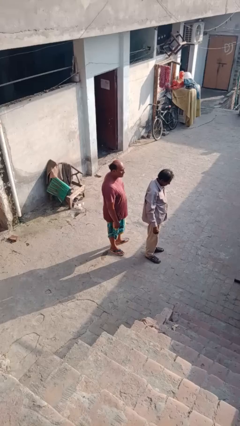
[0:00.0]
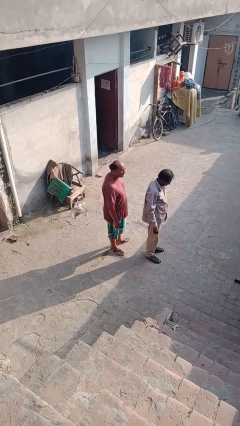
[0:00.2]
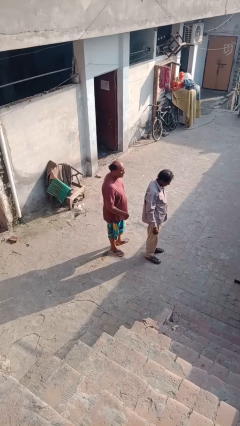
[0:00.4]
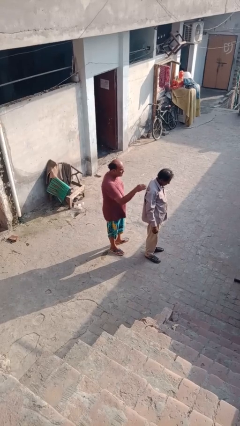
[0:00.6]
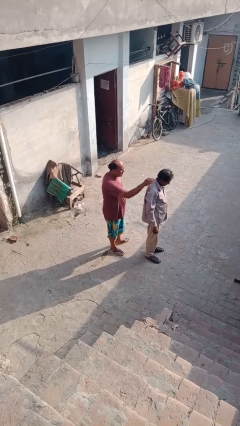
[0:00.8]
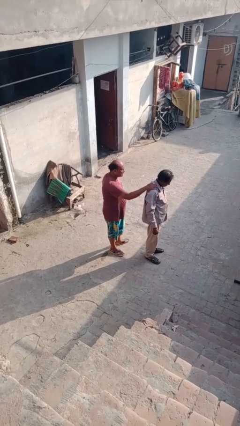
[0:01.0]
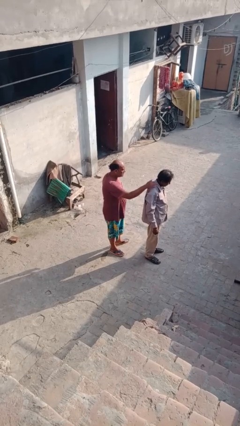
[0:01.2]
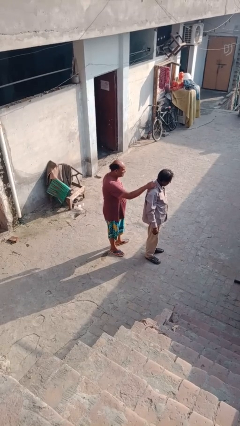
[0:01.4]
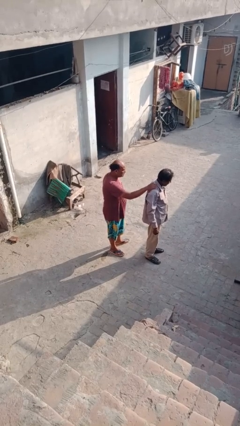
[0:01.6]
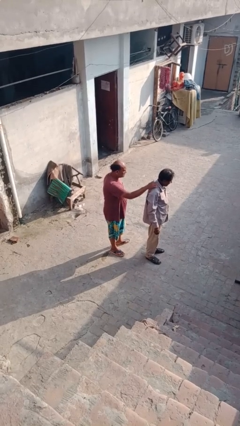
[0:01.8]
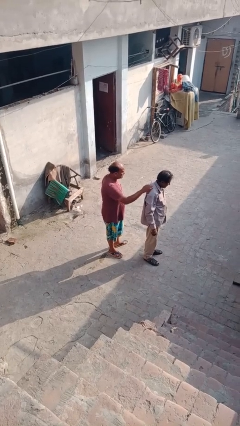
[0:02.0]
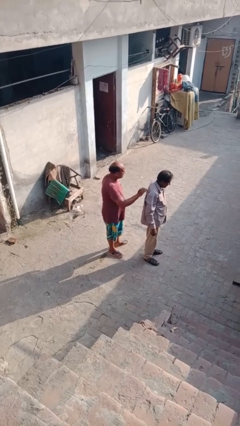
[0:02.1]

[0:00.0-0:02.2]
person touches back of person

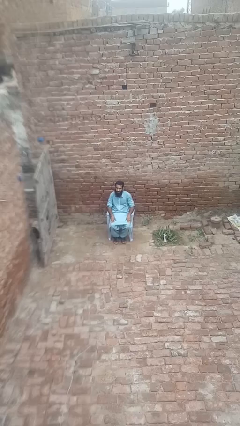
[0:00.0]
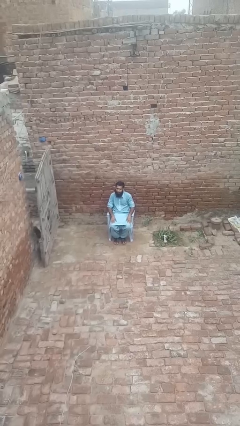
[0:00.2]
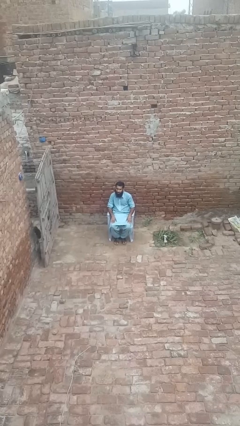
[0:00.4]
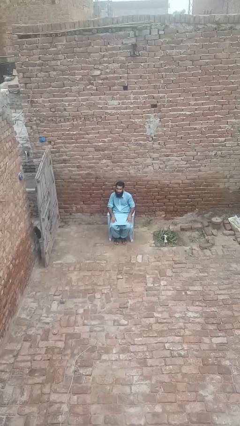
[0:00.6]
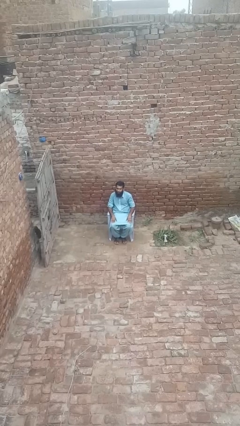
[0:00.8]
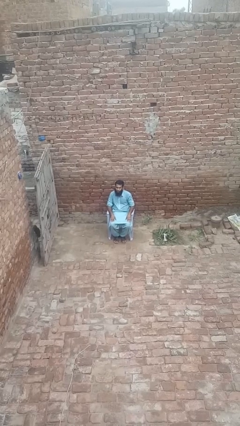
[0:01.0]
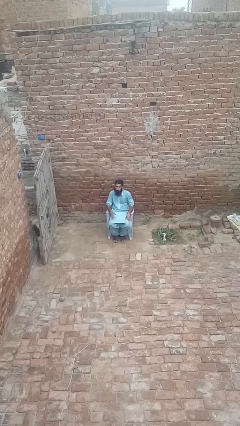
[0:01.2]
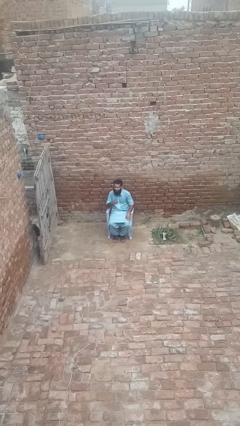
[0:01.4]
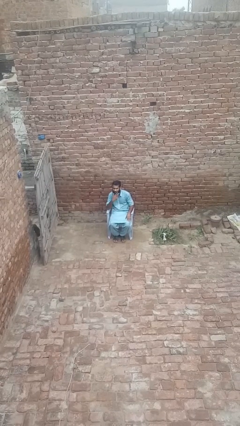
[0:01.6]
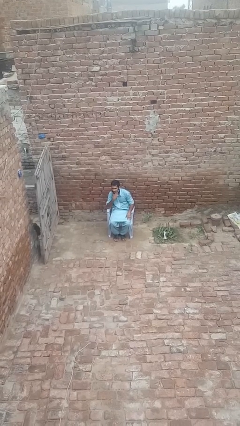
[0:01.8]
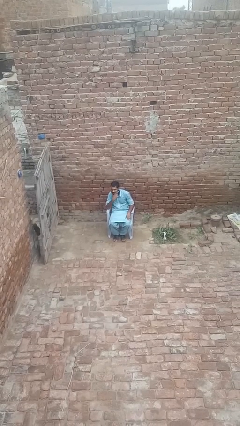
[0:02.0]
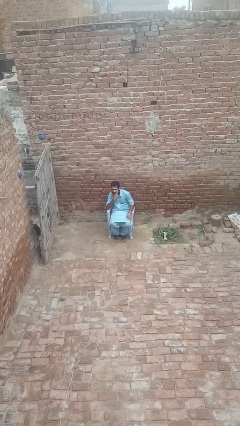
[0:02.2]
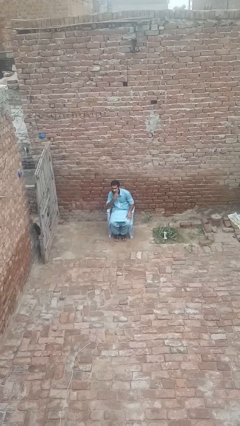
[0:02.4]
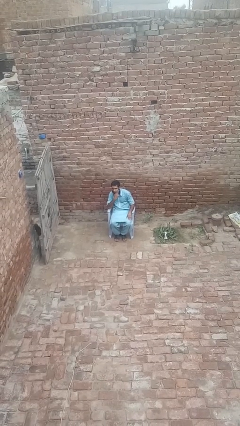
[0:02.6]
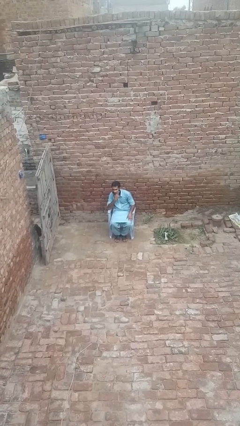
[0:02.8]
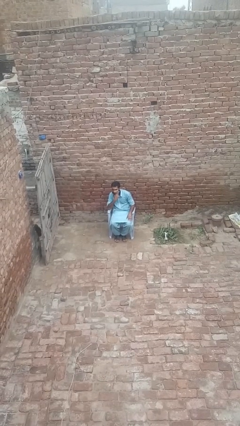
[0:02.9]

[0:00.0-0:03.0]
person strokes chin

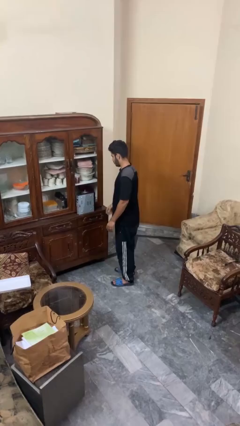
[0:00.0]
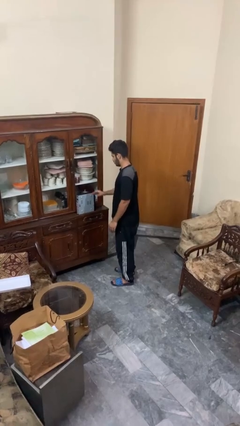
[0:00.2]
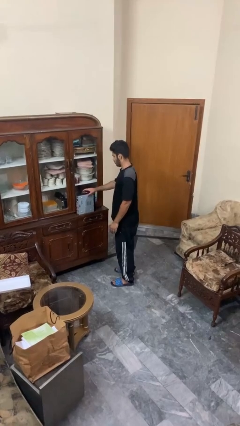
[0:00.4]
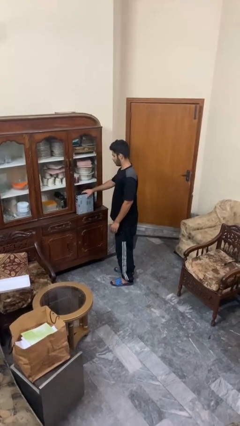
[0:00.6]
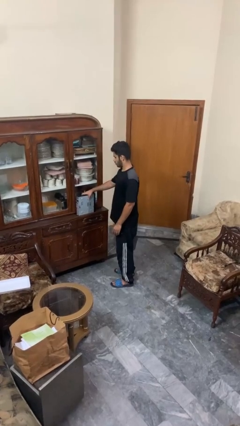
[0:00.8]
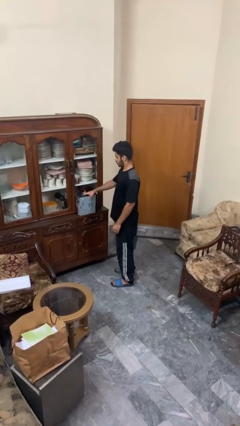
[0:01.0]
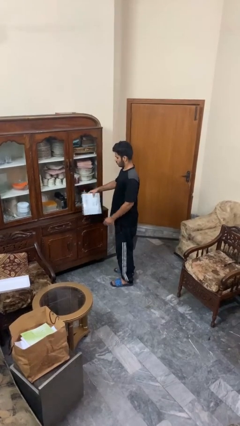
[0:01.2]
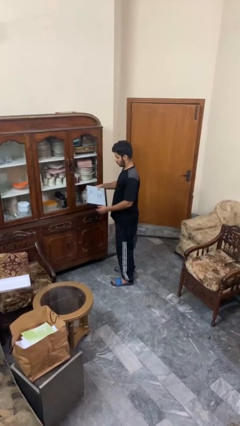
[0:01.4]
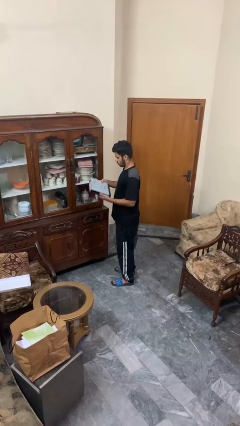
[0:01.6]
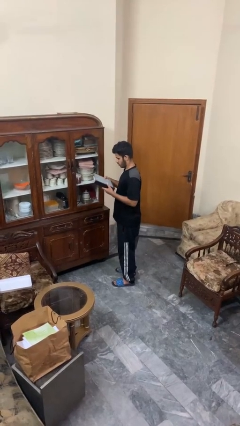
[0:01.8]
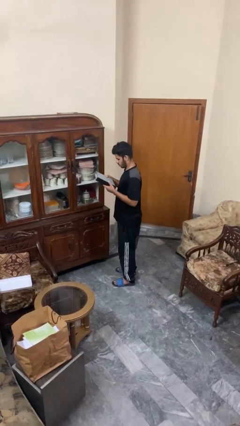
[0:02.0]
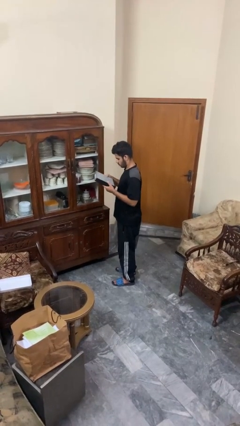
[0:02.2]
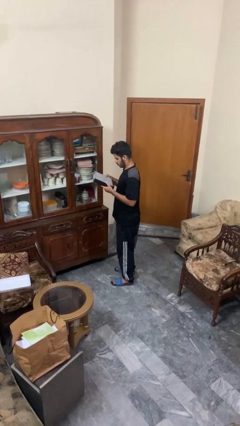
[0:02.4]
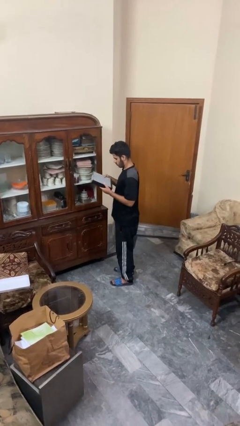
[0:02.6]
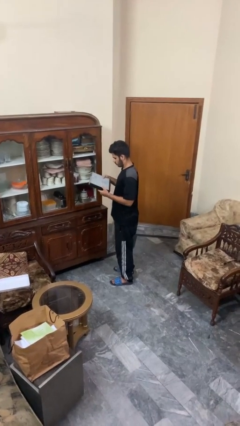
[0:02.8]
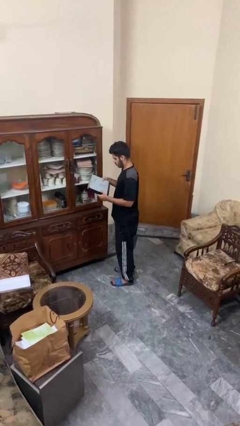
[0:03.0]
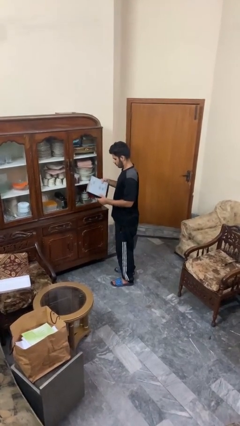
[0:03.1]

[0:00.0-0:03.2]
person picks up object from countertop

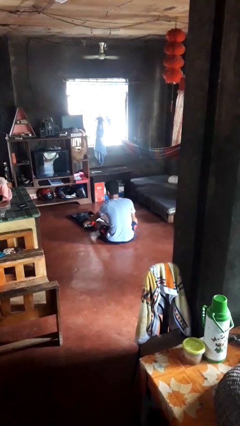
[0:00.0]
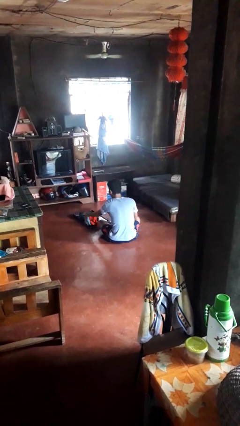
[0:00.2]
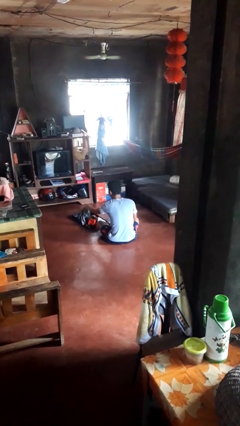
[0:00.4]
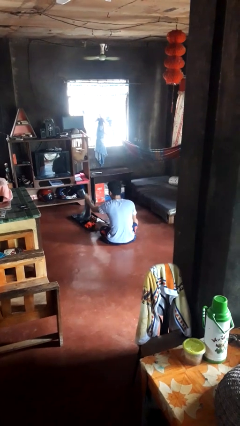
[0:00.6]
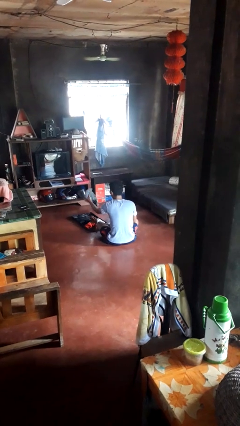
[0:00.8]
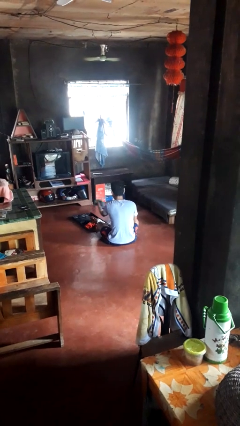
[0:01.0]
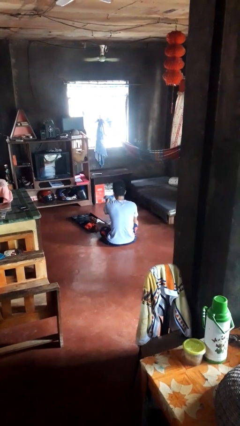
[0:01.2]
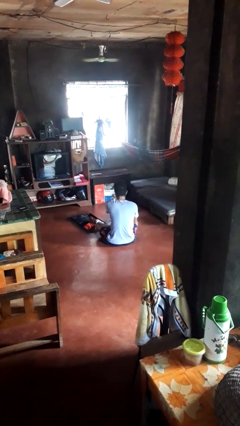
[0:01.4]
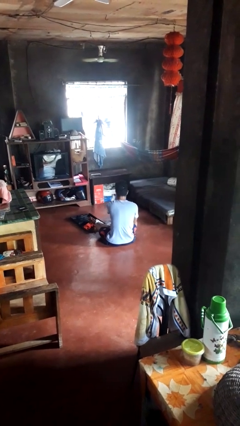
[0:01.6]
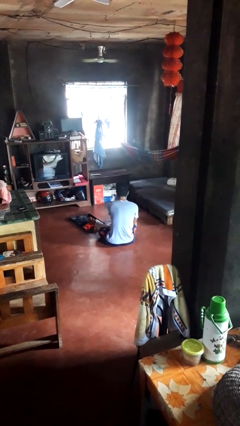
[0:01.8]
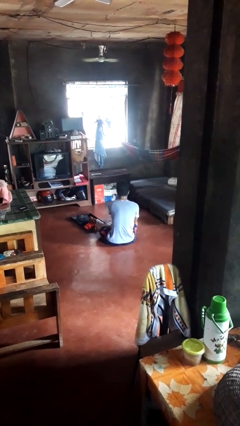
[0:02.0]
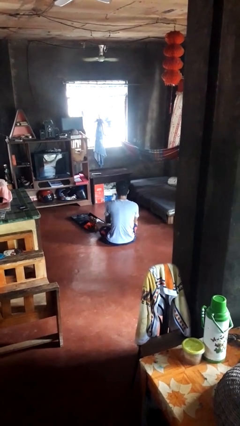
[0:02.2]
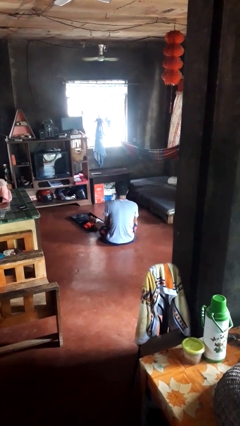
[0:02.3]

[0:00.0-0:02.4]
person unloads clothes from suitcase

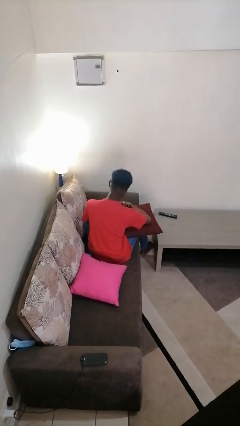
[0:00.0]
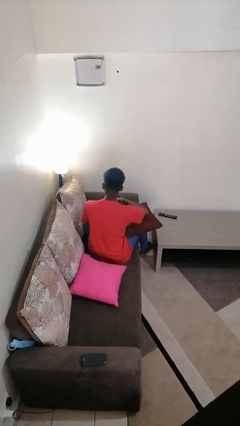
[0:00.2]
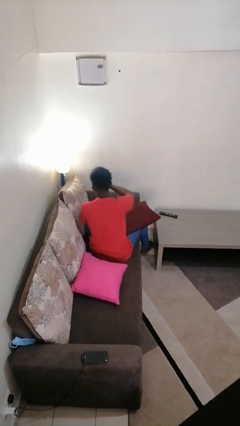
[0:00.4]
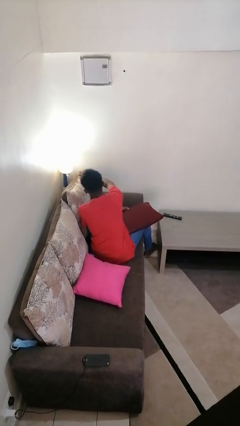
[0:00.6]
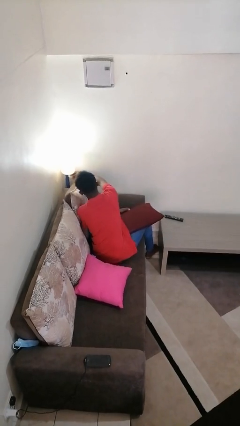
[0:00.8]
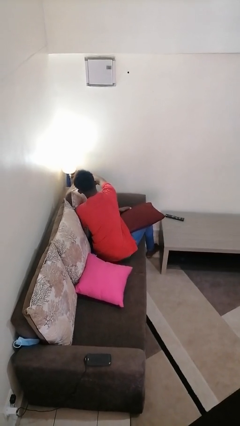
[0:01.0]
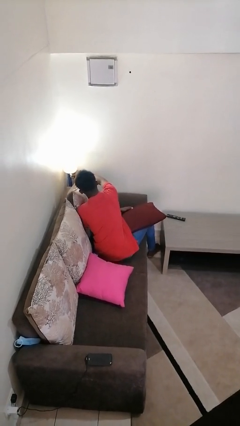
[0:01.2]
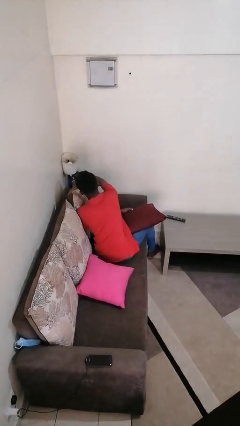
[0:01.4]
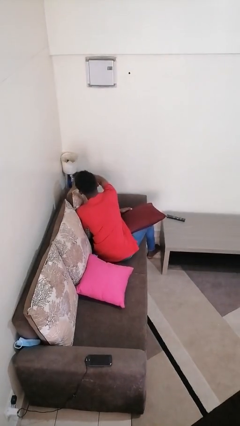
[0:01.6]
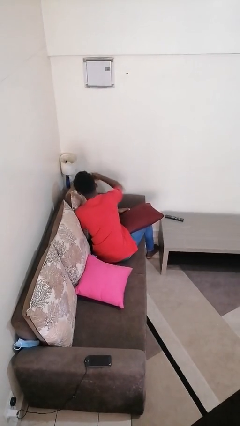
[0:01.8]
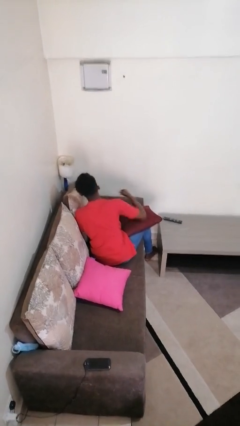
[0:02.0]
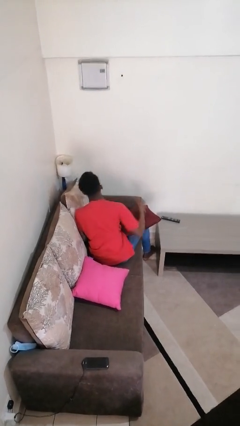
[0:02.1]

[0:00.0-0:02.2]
person turns off lamp

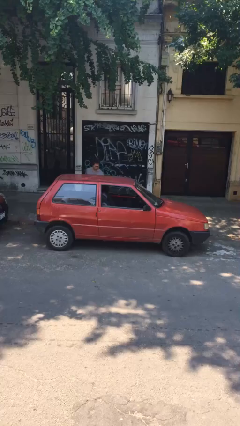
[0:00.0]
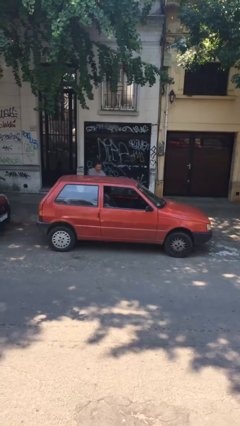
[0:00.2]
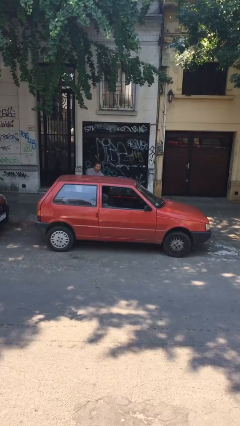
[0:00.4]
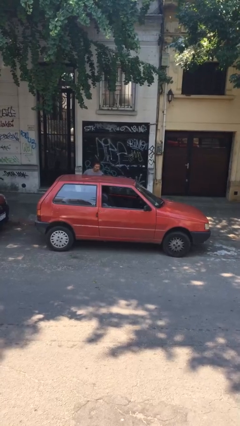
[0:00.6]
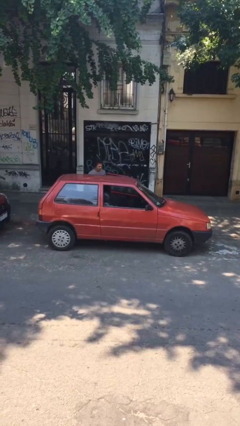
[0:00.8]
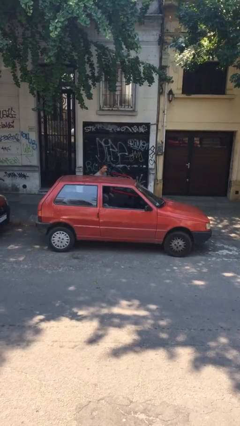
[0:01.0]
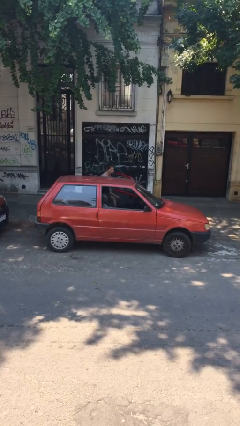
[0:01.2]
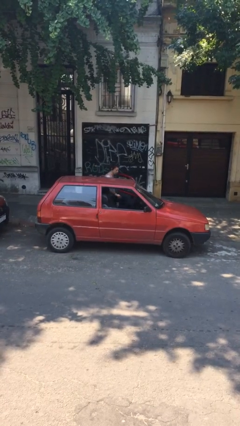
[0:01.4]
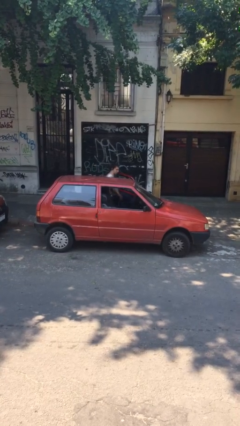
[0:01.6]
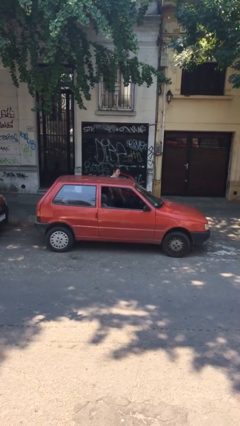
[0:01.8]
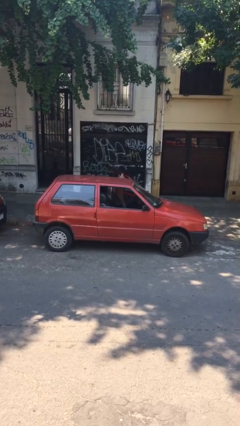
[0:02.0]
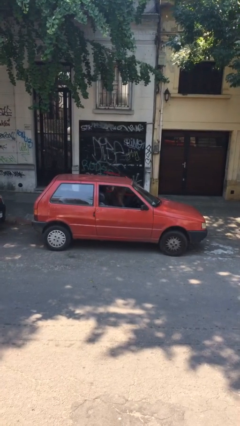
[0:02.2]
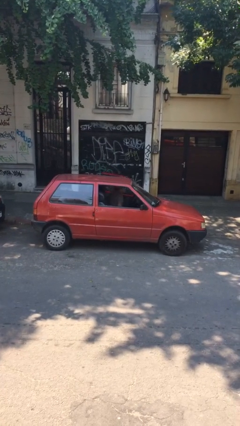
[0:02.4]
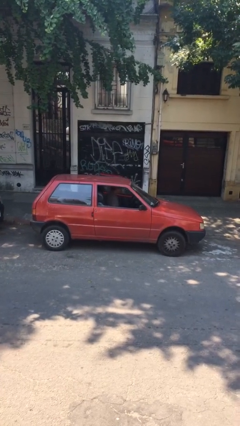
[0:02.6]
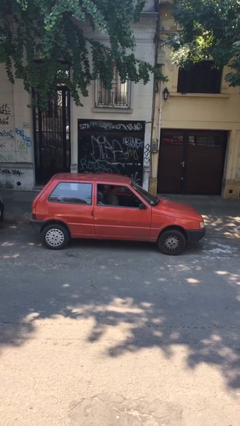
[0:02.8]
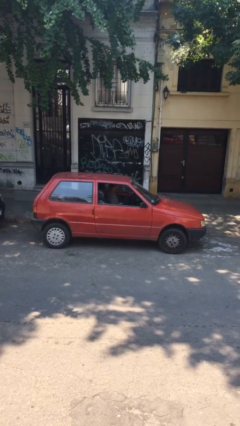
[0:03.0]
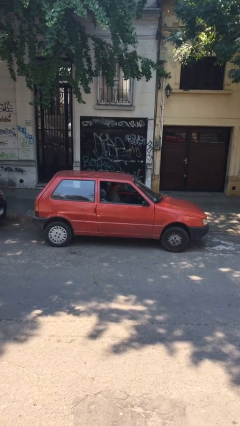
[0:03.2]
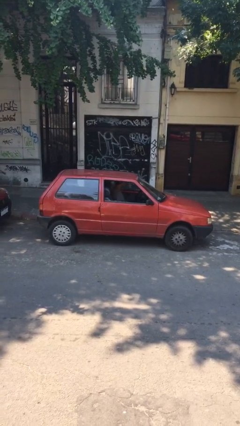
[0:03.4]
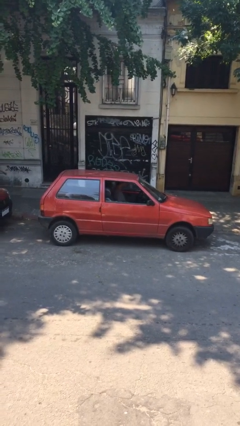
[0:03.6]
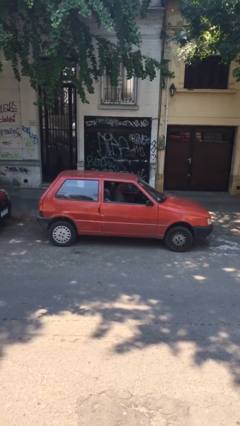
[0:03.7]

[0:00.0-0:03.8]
car picks up person

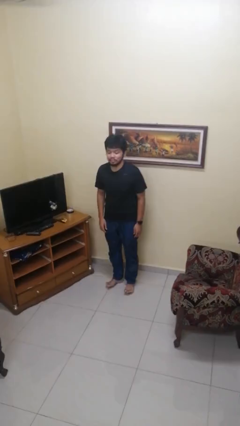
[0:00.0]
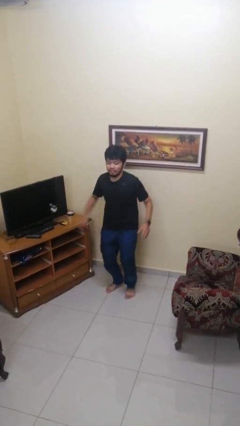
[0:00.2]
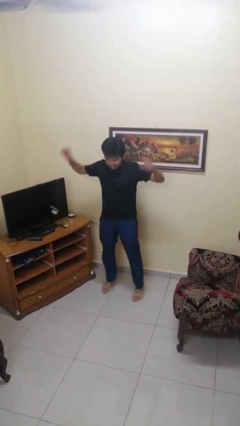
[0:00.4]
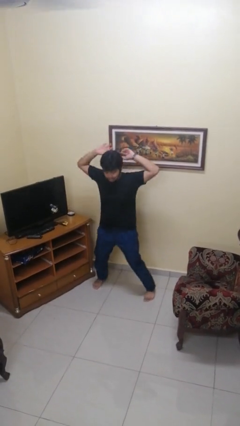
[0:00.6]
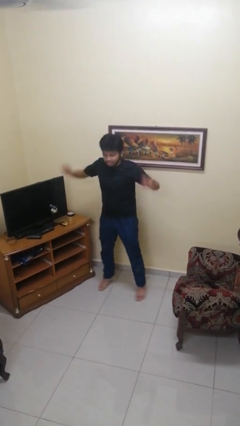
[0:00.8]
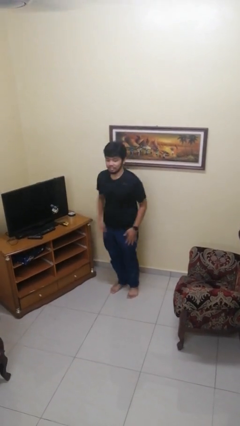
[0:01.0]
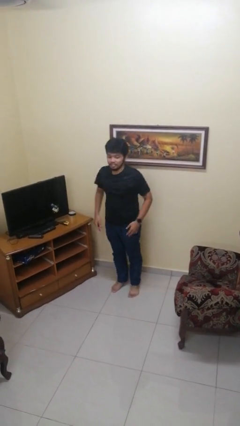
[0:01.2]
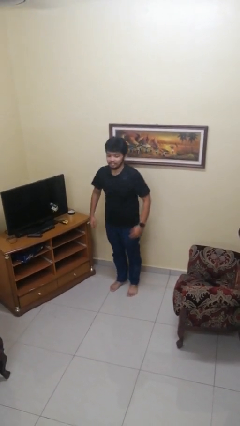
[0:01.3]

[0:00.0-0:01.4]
person exercises with jumping jacks
